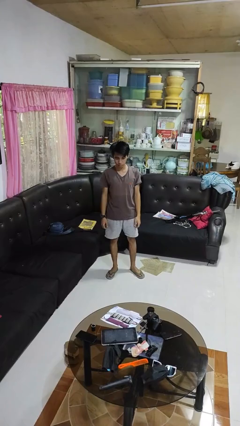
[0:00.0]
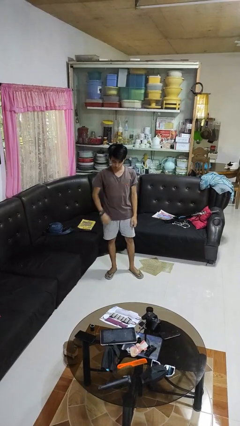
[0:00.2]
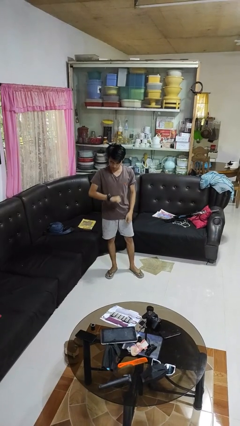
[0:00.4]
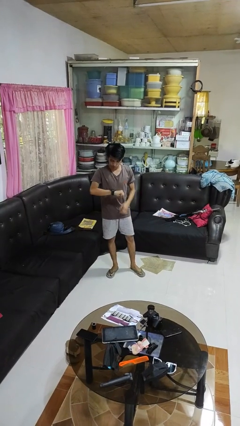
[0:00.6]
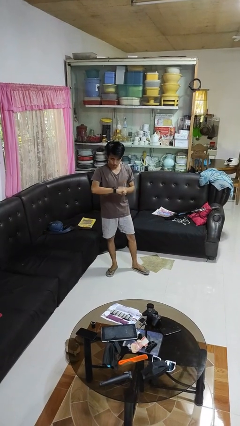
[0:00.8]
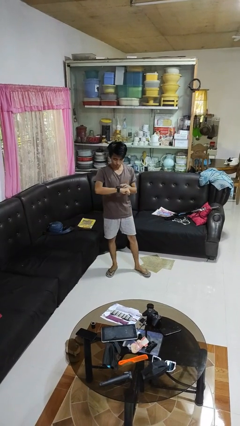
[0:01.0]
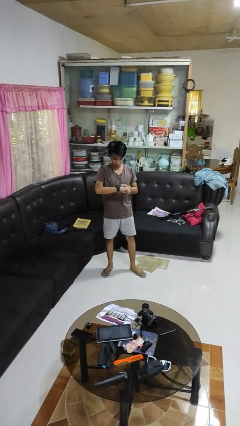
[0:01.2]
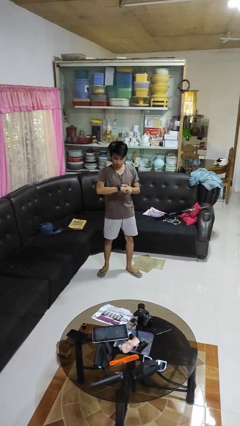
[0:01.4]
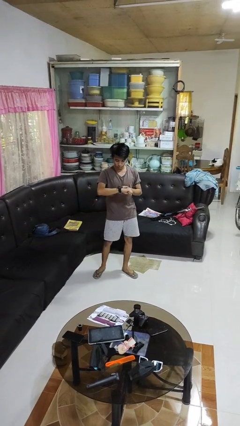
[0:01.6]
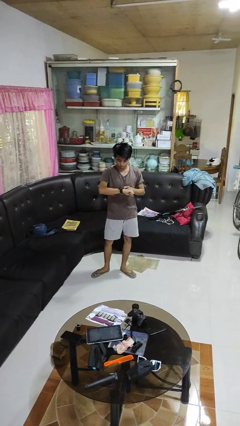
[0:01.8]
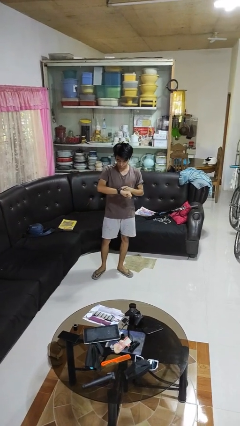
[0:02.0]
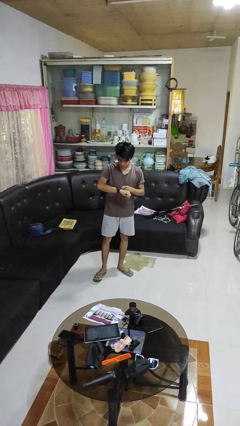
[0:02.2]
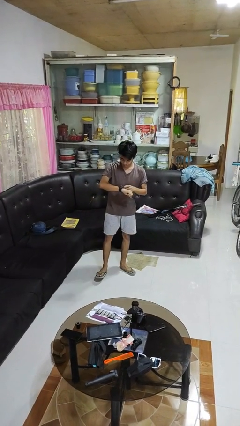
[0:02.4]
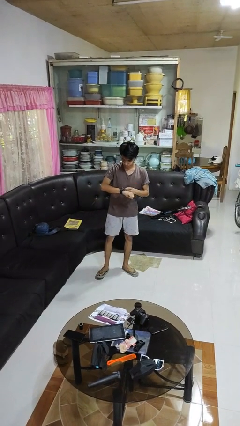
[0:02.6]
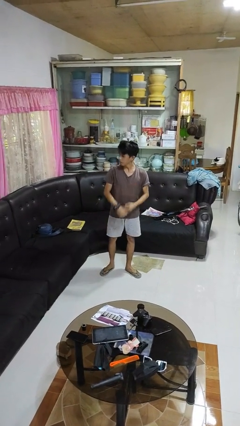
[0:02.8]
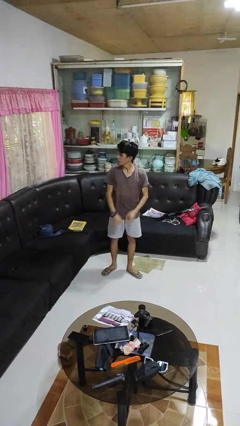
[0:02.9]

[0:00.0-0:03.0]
person looks at wristwatch

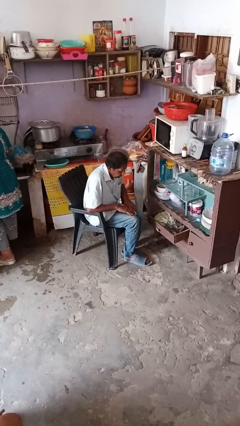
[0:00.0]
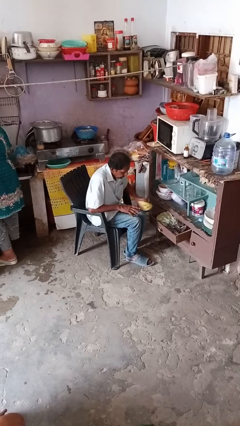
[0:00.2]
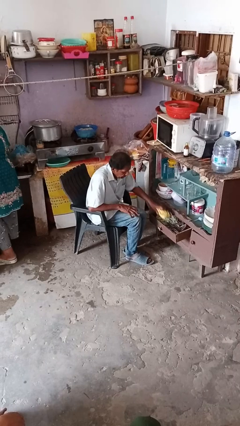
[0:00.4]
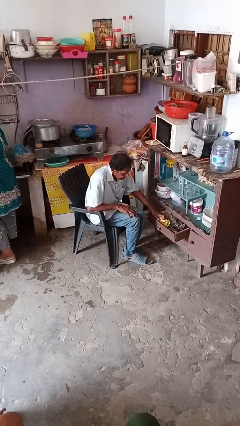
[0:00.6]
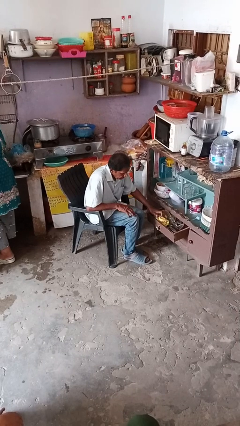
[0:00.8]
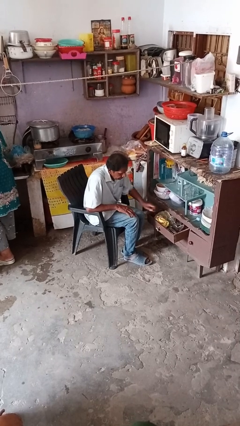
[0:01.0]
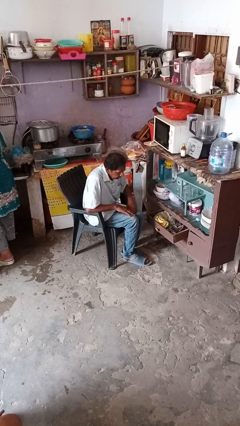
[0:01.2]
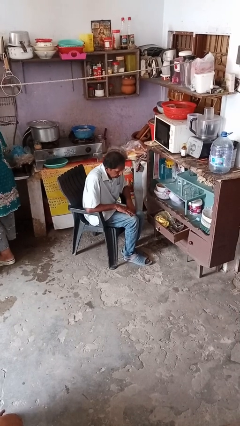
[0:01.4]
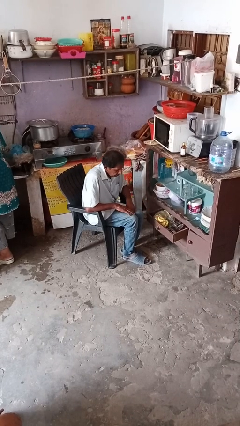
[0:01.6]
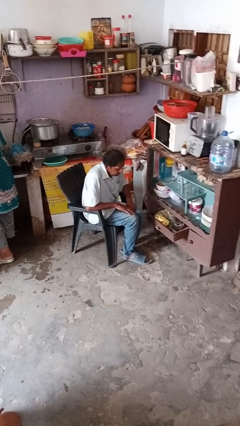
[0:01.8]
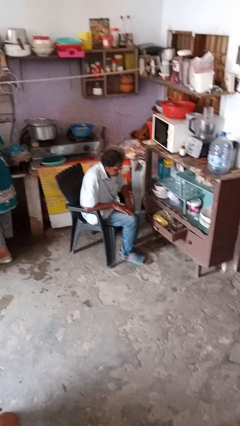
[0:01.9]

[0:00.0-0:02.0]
person puts clothes into dresser

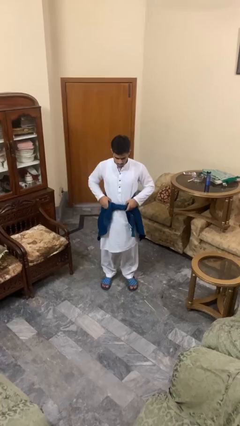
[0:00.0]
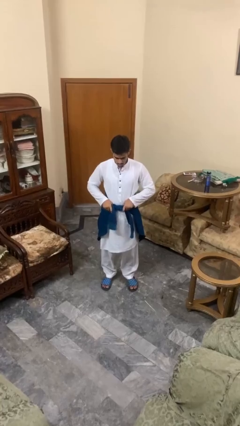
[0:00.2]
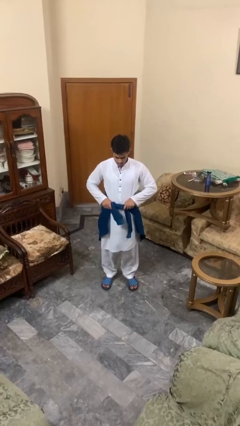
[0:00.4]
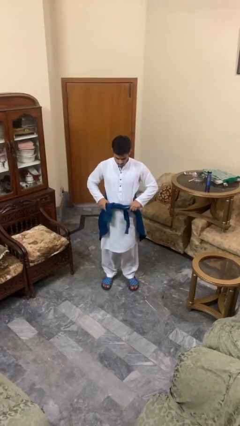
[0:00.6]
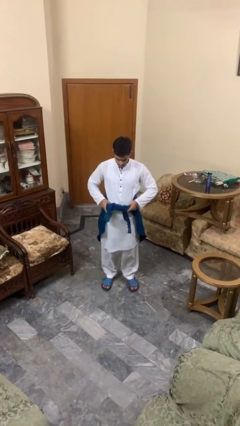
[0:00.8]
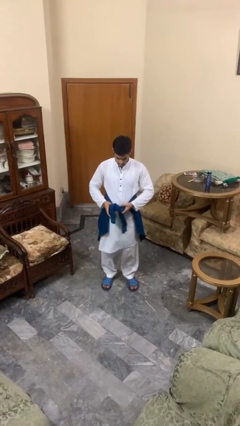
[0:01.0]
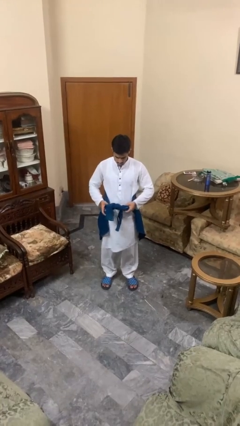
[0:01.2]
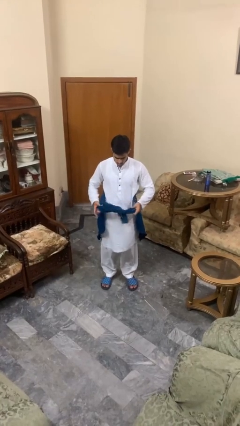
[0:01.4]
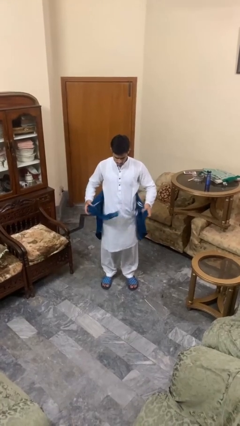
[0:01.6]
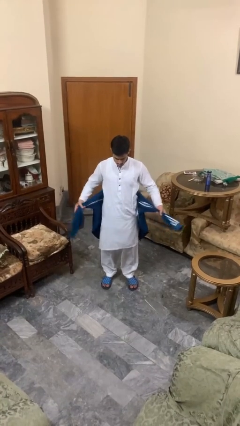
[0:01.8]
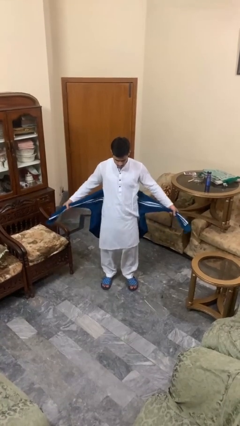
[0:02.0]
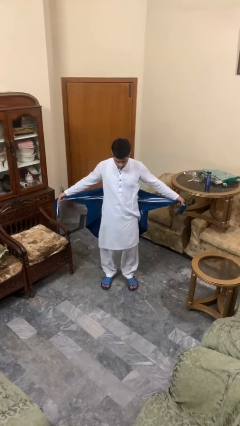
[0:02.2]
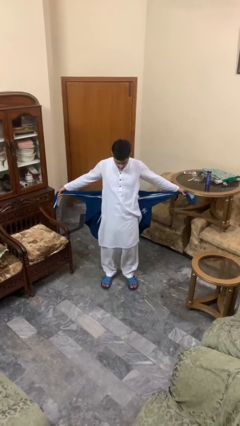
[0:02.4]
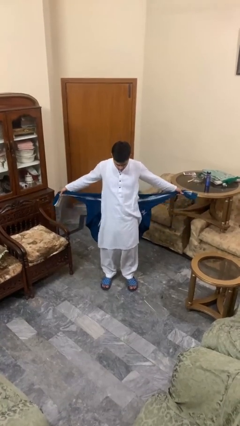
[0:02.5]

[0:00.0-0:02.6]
person unties jacket around waist

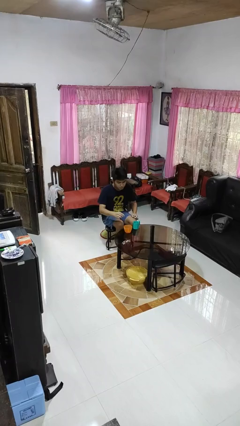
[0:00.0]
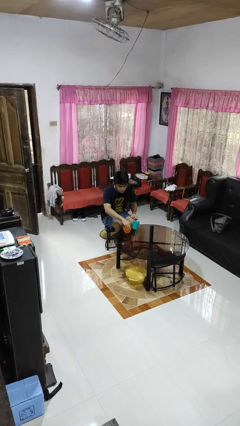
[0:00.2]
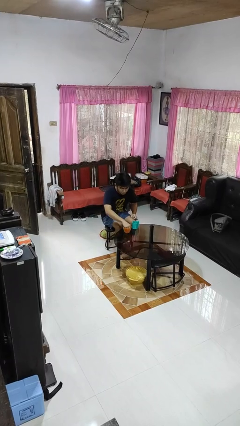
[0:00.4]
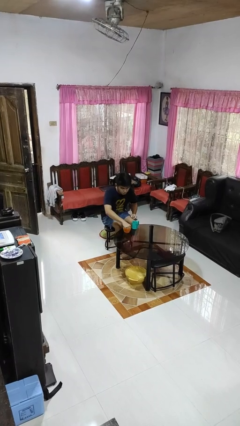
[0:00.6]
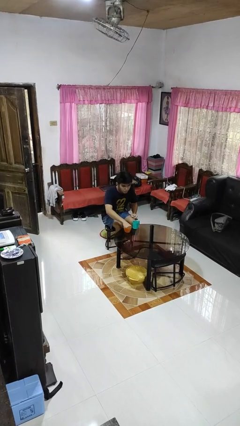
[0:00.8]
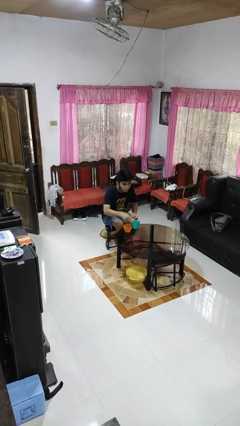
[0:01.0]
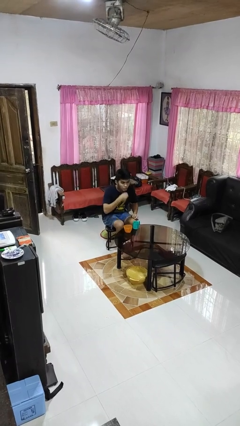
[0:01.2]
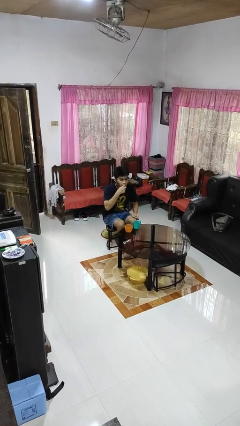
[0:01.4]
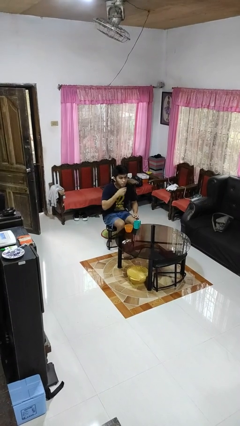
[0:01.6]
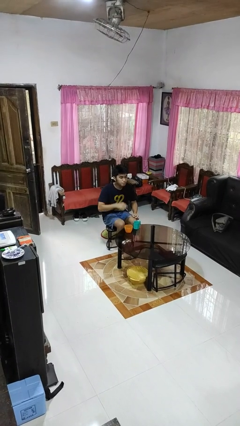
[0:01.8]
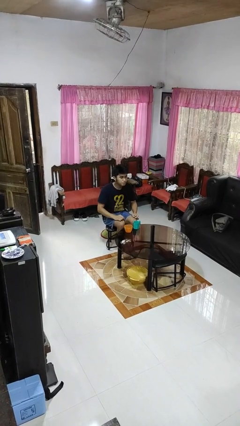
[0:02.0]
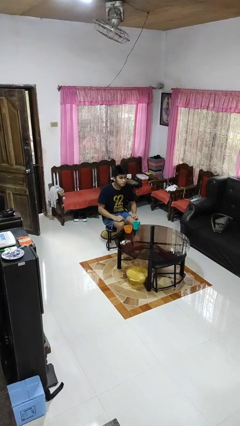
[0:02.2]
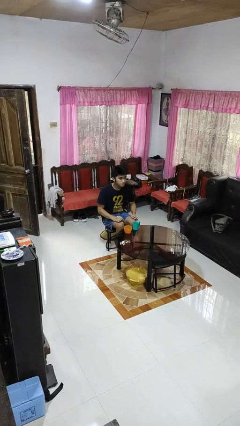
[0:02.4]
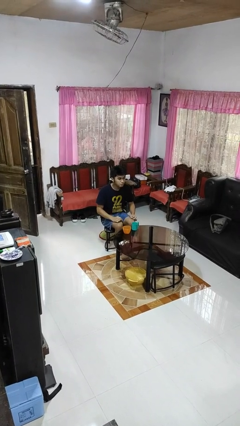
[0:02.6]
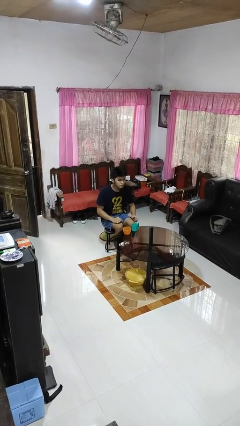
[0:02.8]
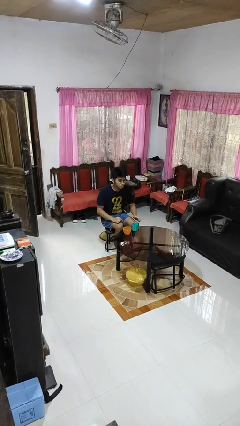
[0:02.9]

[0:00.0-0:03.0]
person takes medicine pills

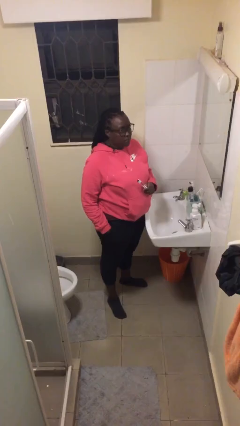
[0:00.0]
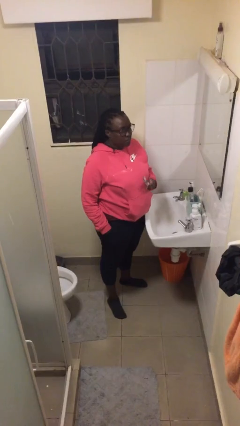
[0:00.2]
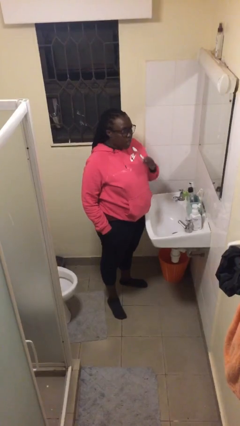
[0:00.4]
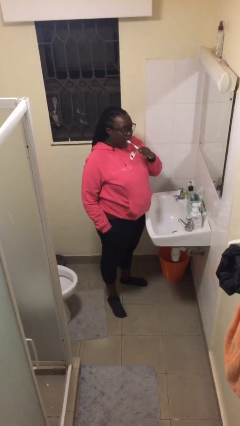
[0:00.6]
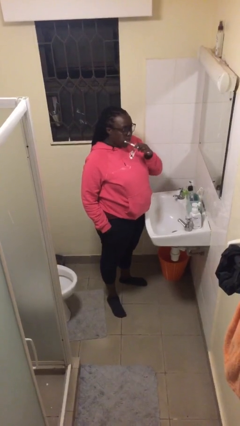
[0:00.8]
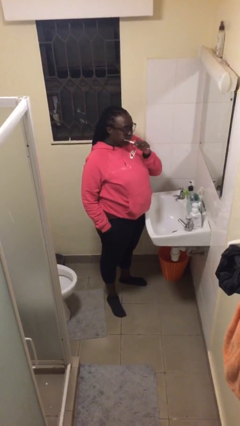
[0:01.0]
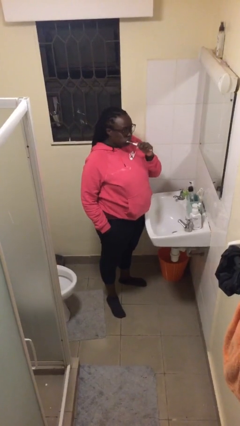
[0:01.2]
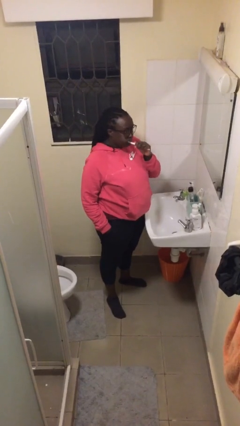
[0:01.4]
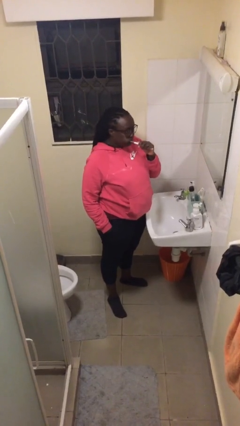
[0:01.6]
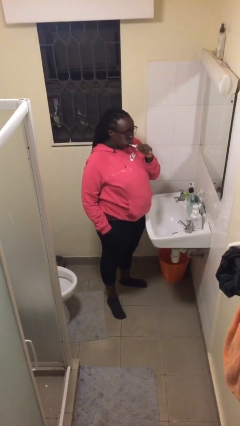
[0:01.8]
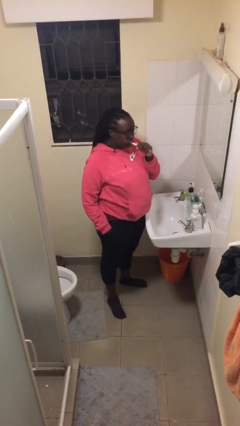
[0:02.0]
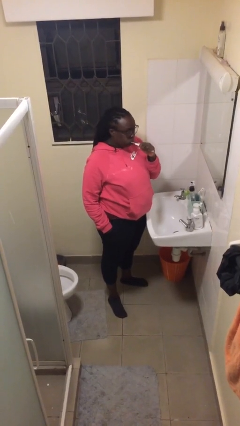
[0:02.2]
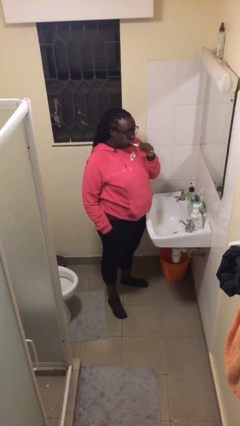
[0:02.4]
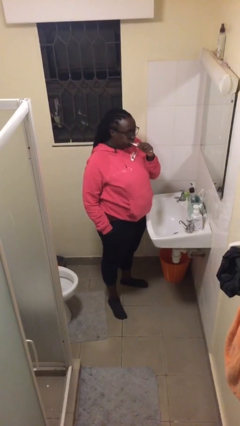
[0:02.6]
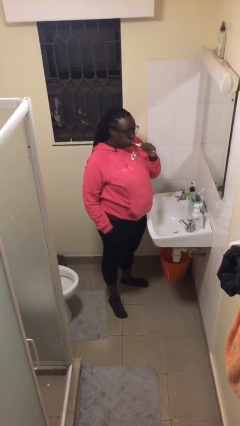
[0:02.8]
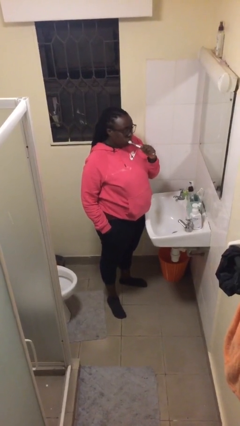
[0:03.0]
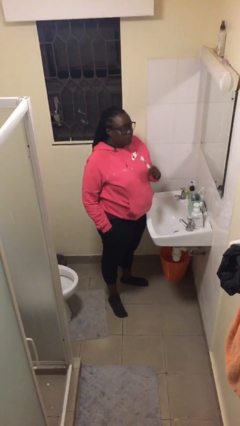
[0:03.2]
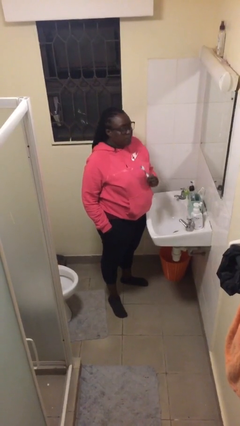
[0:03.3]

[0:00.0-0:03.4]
person brushes teeth

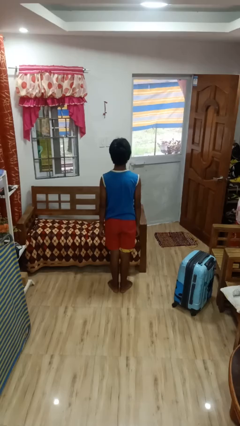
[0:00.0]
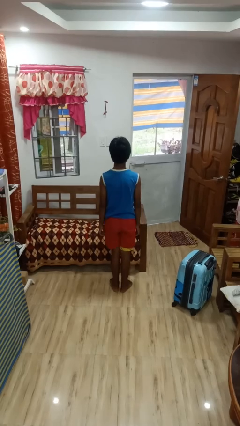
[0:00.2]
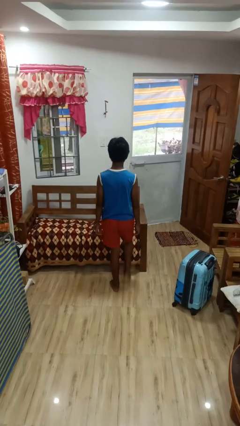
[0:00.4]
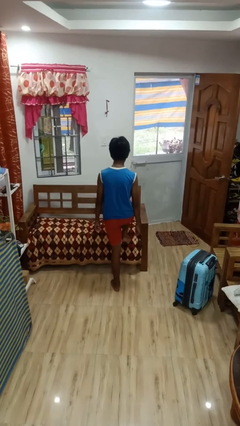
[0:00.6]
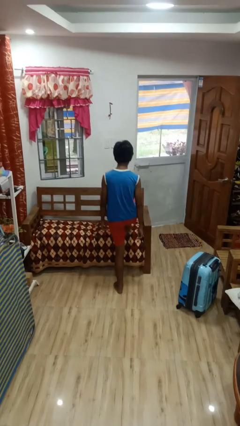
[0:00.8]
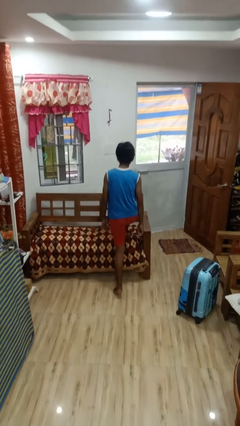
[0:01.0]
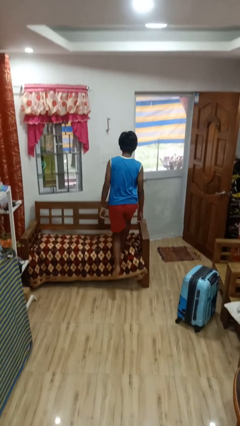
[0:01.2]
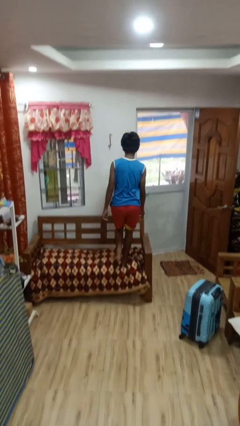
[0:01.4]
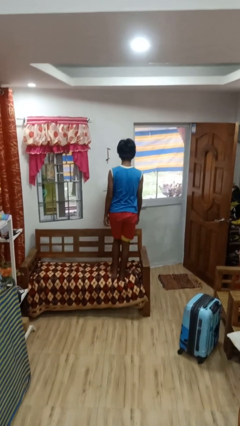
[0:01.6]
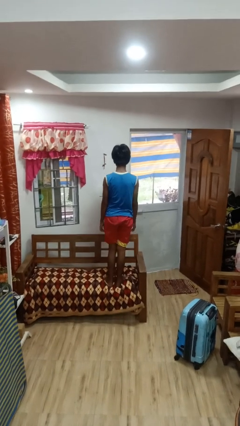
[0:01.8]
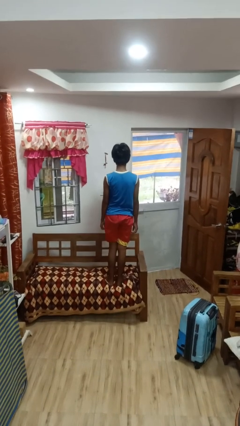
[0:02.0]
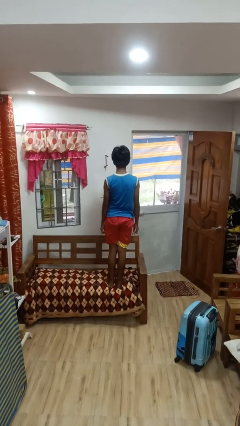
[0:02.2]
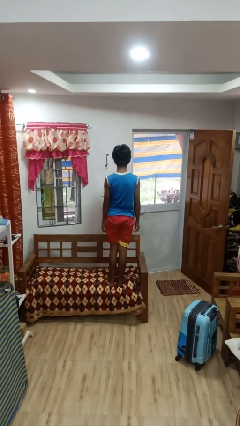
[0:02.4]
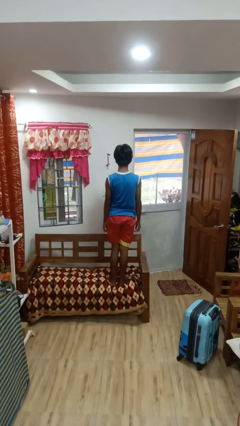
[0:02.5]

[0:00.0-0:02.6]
person climbs on couch

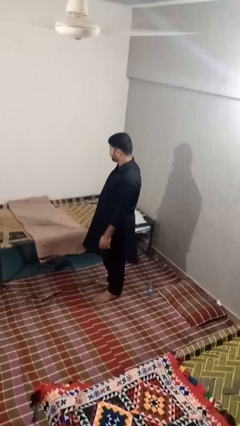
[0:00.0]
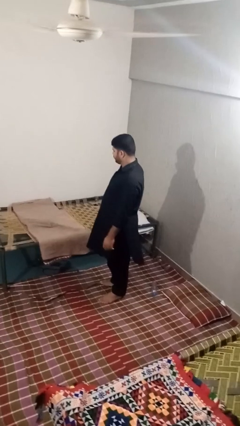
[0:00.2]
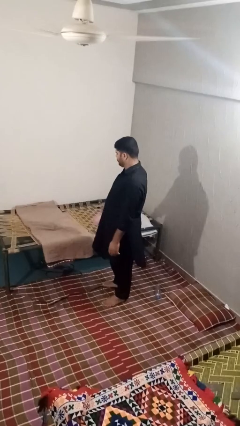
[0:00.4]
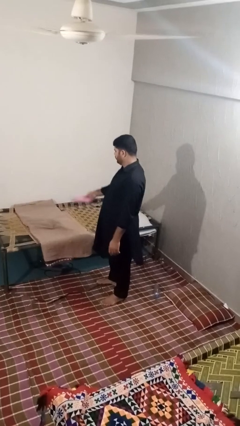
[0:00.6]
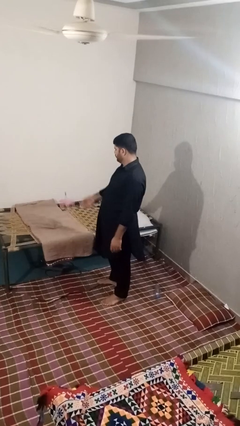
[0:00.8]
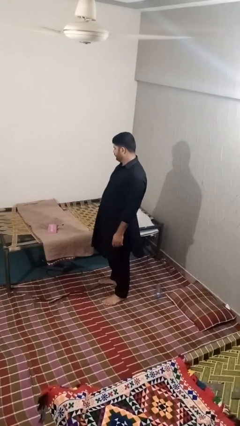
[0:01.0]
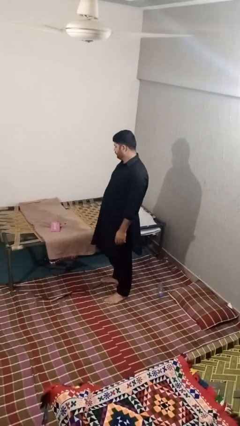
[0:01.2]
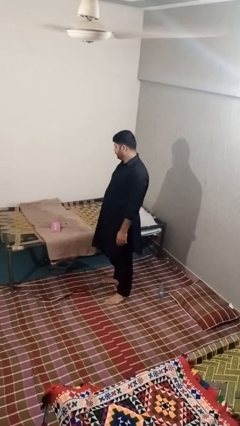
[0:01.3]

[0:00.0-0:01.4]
person puts down object on bed
